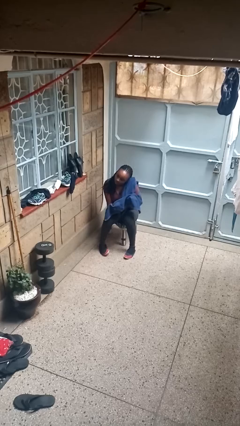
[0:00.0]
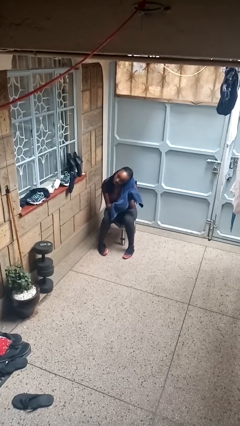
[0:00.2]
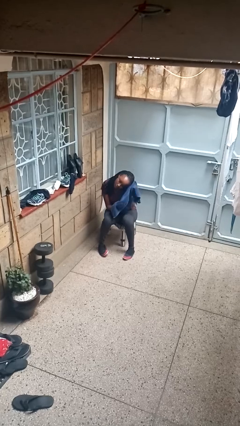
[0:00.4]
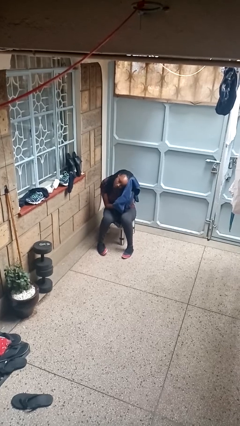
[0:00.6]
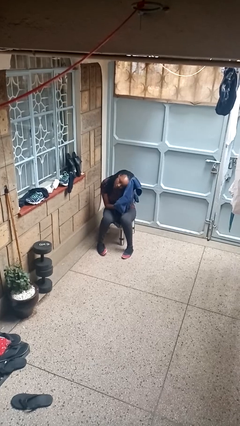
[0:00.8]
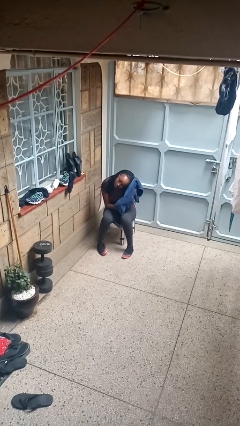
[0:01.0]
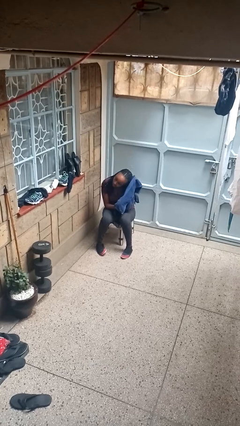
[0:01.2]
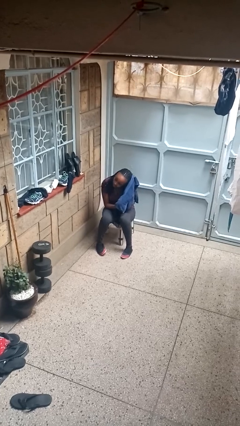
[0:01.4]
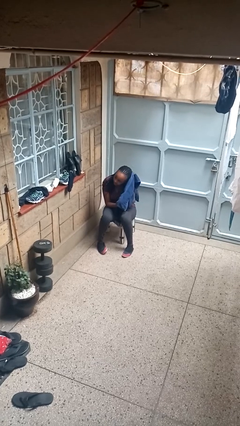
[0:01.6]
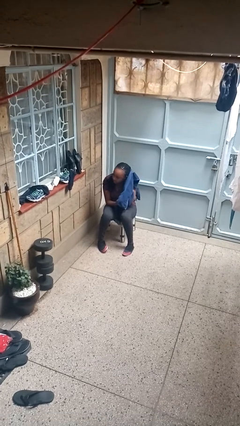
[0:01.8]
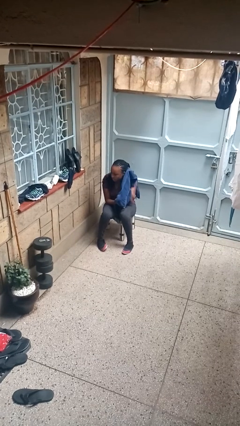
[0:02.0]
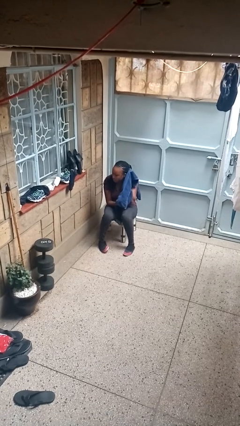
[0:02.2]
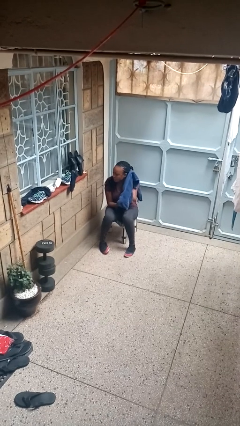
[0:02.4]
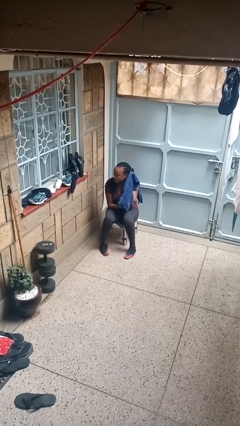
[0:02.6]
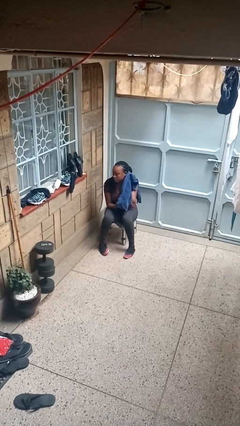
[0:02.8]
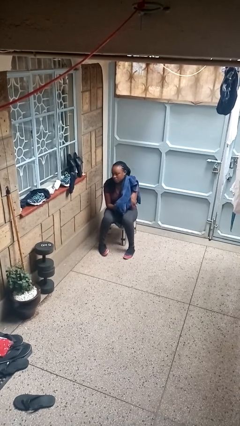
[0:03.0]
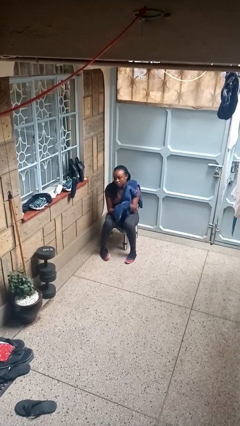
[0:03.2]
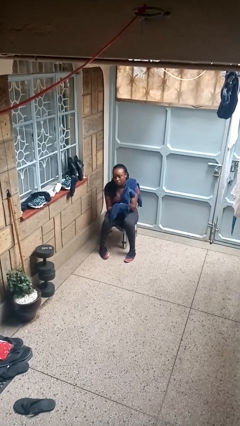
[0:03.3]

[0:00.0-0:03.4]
person dries hair with towel

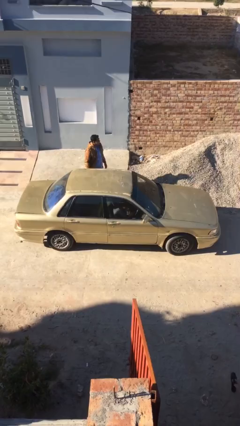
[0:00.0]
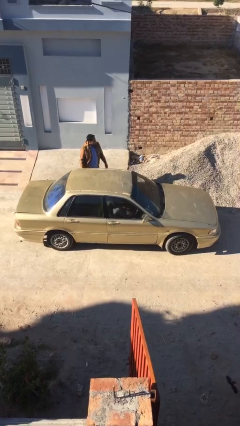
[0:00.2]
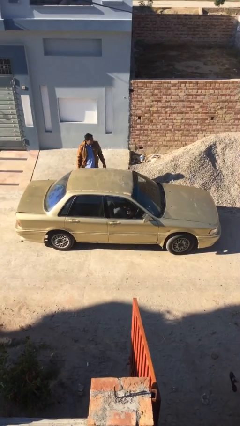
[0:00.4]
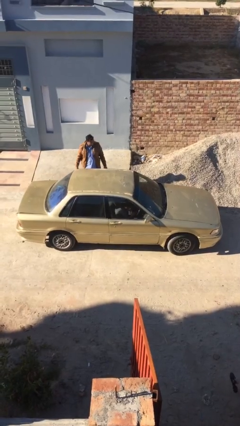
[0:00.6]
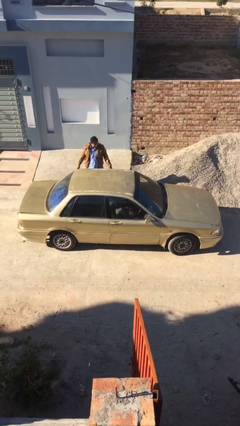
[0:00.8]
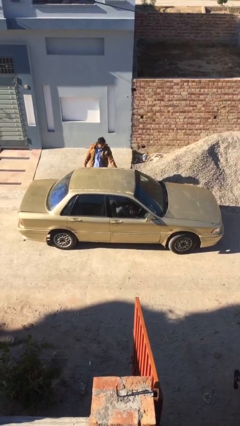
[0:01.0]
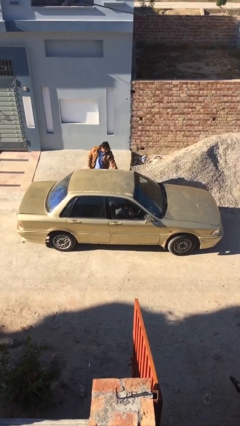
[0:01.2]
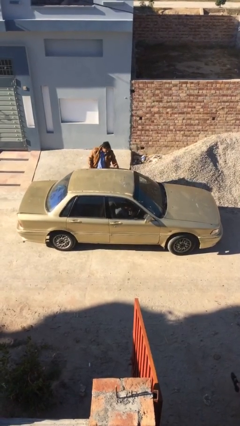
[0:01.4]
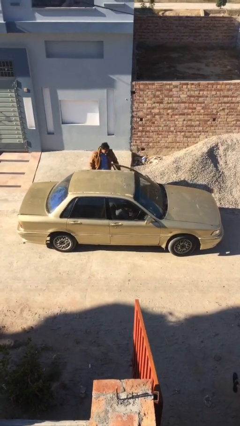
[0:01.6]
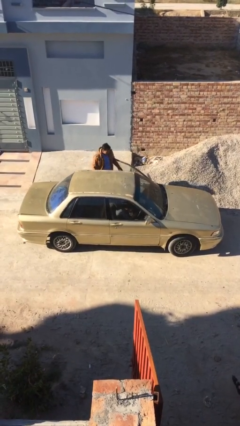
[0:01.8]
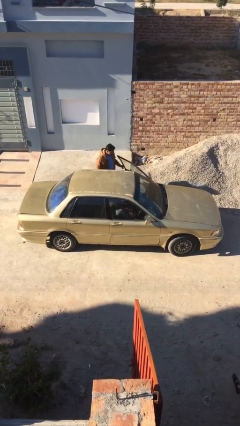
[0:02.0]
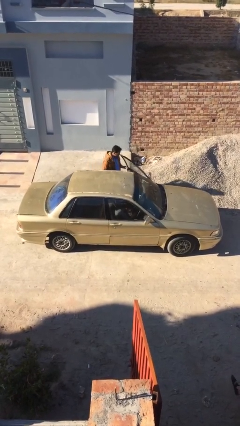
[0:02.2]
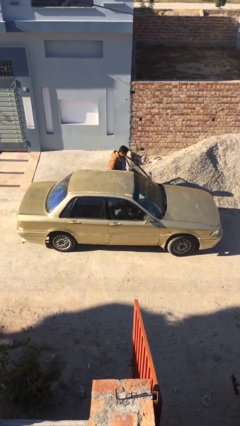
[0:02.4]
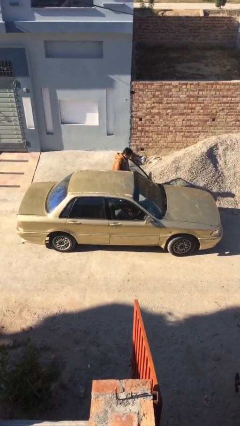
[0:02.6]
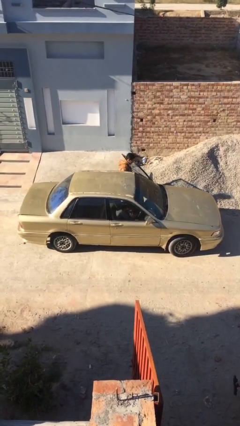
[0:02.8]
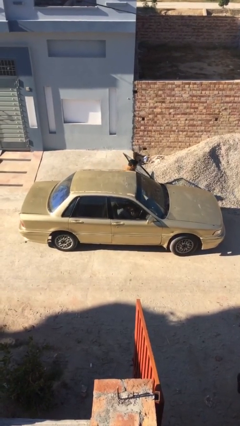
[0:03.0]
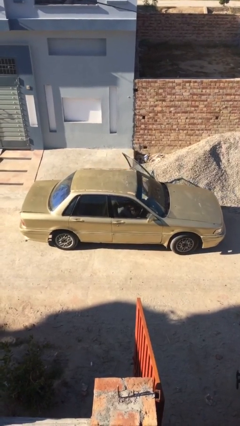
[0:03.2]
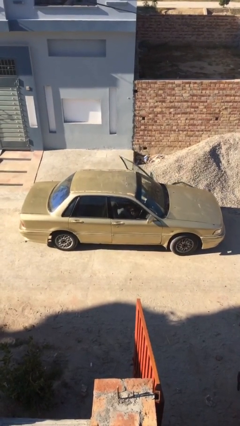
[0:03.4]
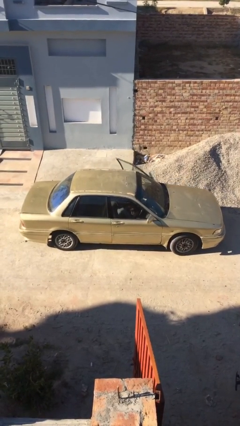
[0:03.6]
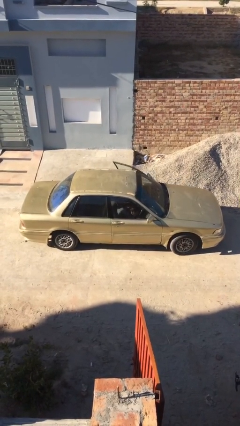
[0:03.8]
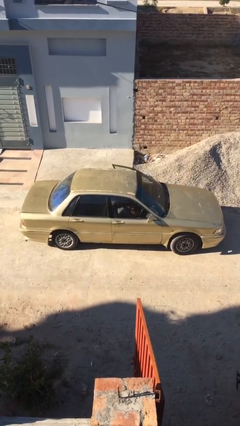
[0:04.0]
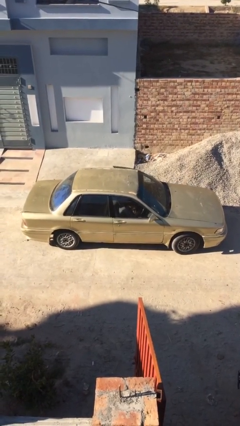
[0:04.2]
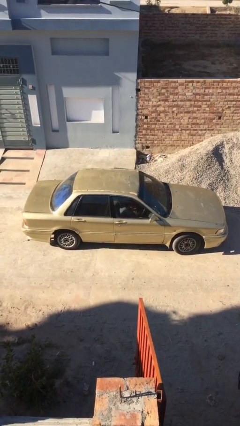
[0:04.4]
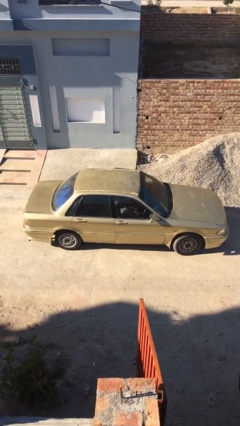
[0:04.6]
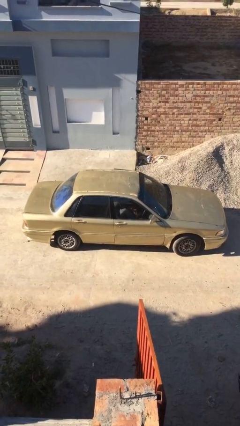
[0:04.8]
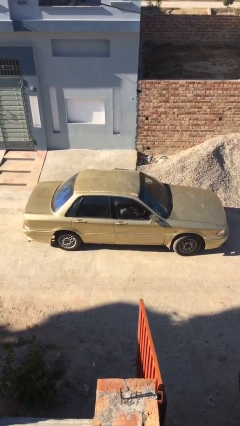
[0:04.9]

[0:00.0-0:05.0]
car picks up person

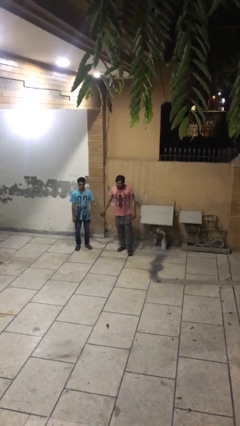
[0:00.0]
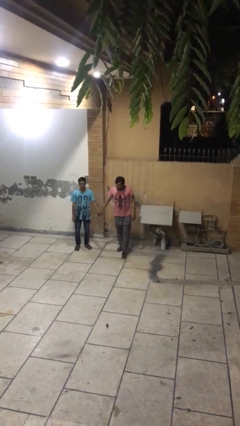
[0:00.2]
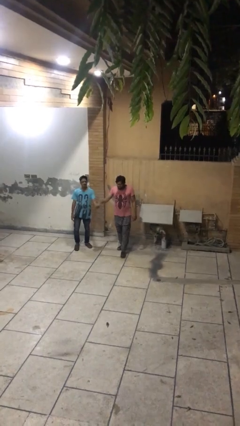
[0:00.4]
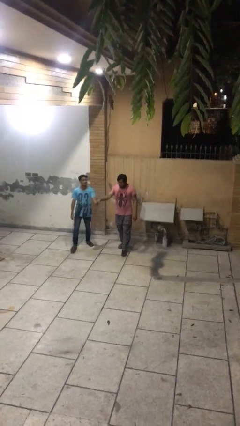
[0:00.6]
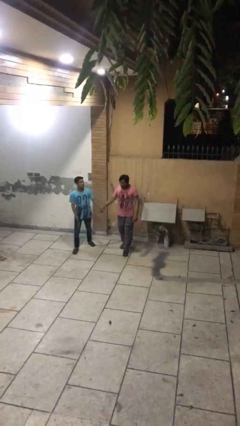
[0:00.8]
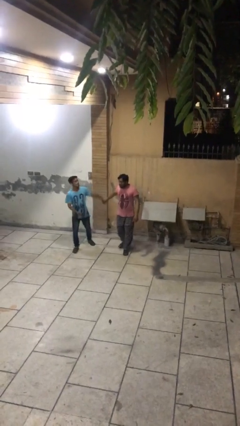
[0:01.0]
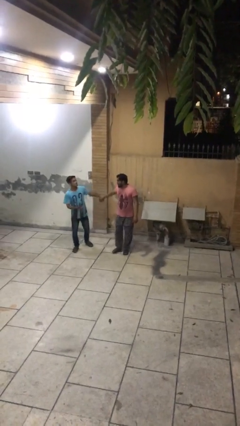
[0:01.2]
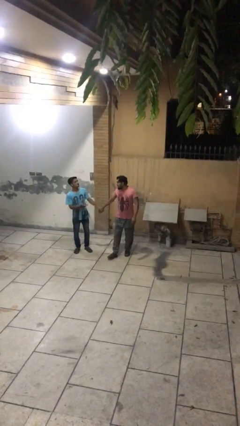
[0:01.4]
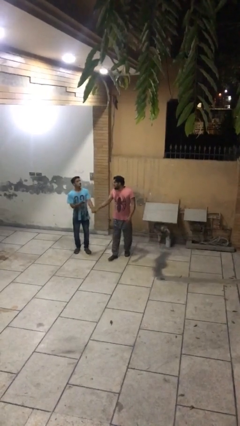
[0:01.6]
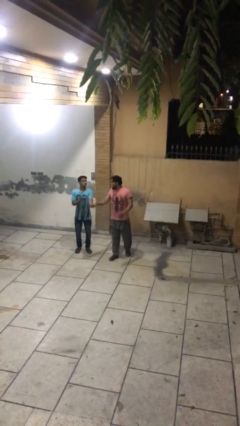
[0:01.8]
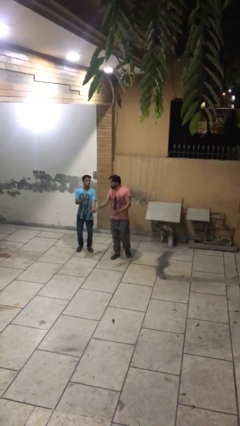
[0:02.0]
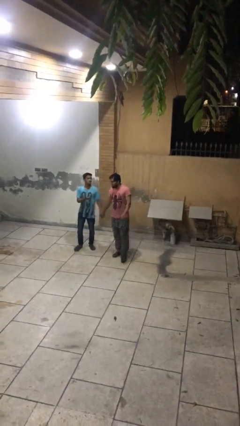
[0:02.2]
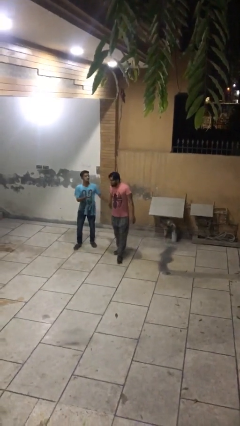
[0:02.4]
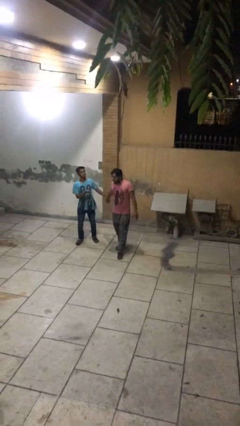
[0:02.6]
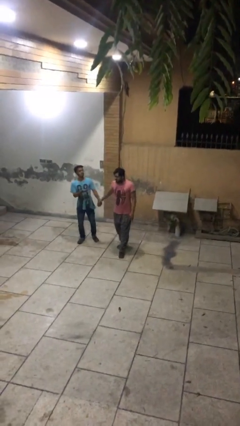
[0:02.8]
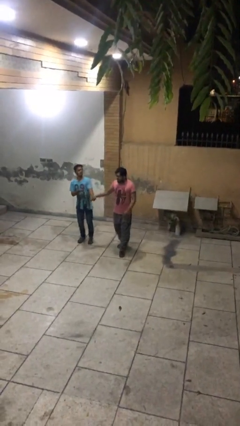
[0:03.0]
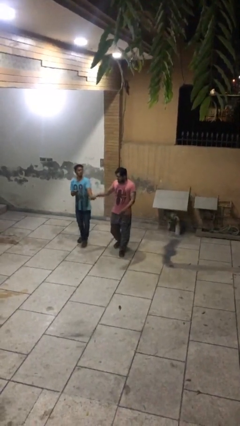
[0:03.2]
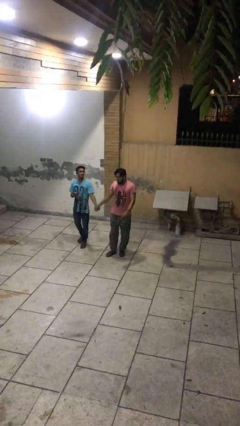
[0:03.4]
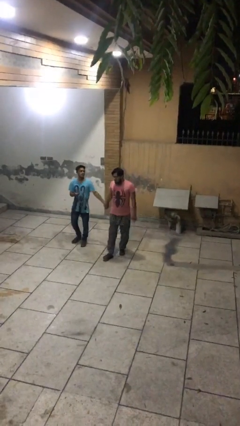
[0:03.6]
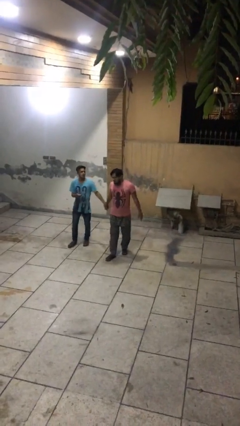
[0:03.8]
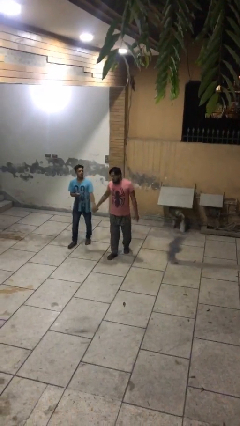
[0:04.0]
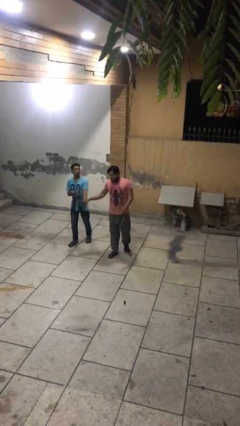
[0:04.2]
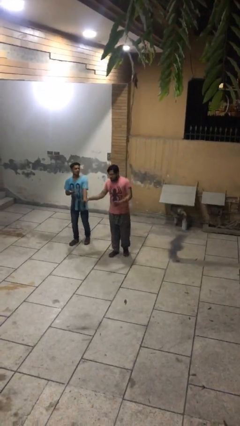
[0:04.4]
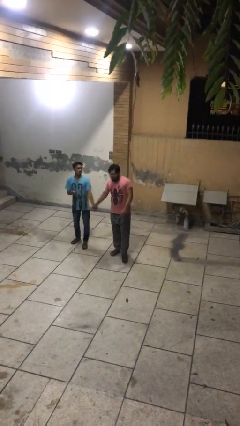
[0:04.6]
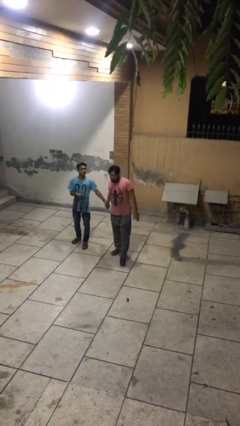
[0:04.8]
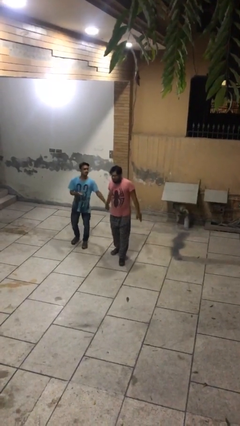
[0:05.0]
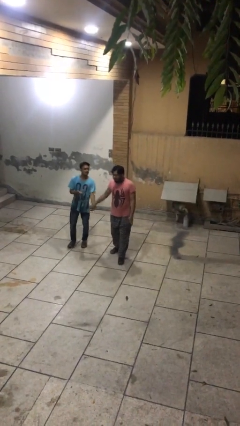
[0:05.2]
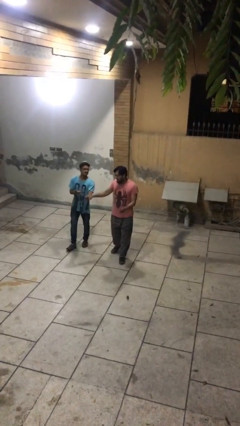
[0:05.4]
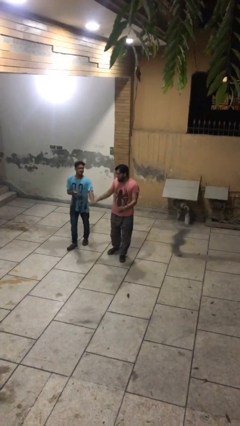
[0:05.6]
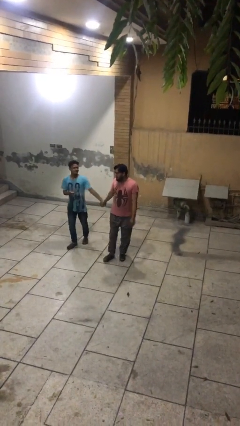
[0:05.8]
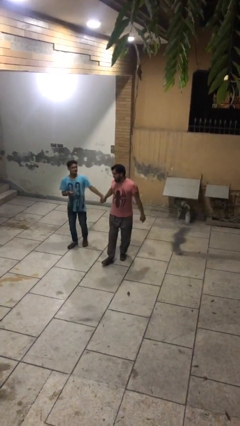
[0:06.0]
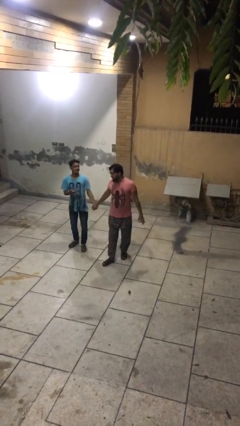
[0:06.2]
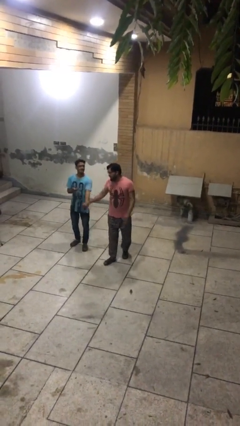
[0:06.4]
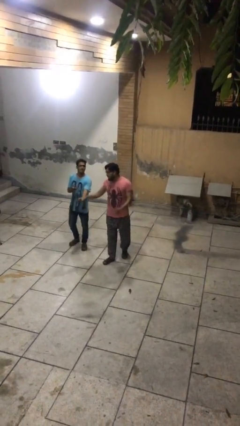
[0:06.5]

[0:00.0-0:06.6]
person holds hand

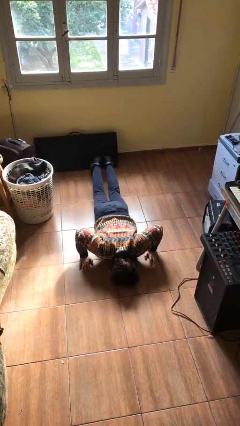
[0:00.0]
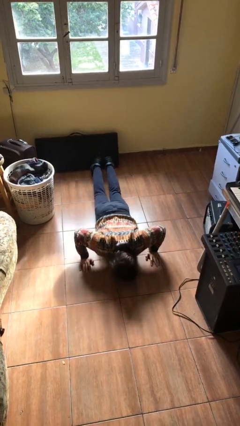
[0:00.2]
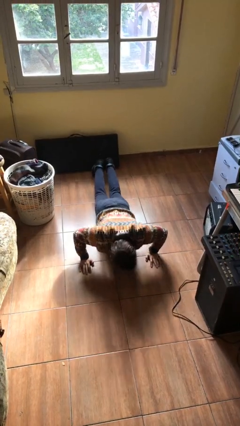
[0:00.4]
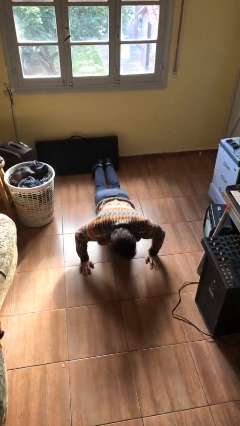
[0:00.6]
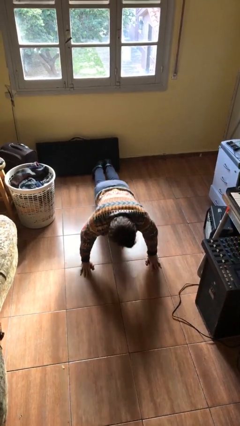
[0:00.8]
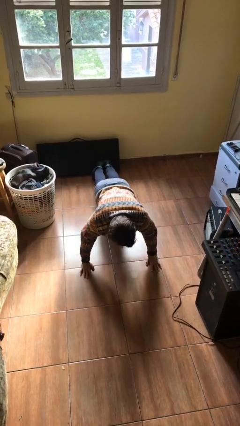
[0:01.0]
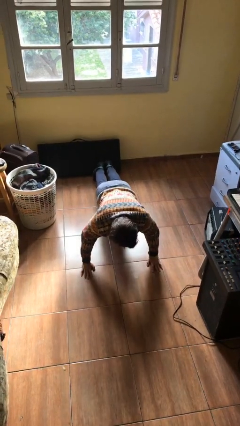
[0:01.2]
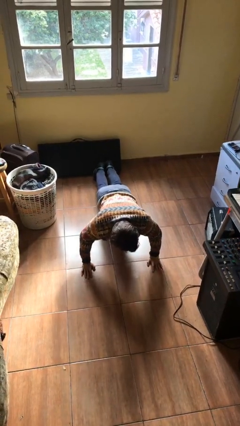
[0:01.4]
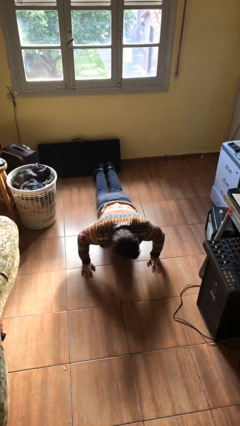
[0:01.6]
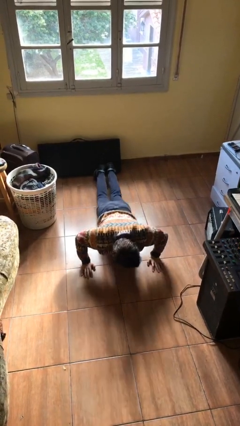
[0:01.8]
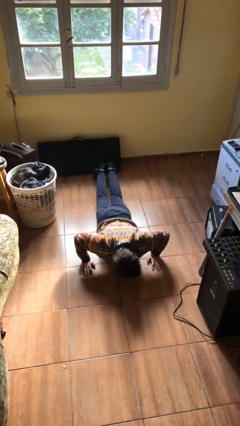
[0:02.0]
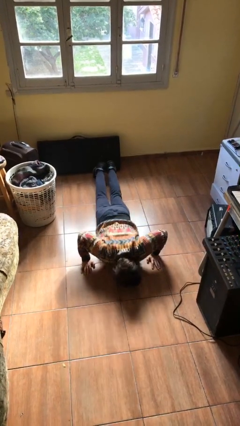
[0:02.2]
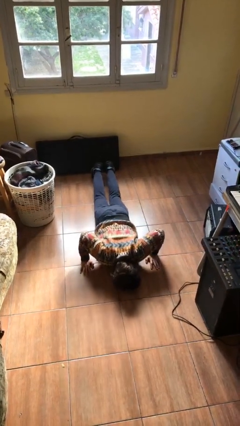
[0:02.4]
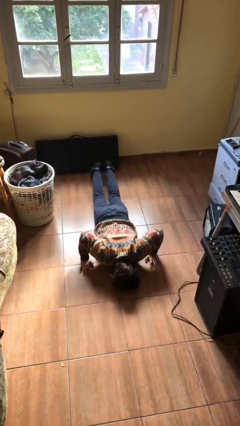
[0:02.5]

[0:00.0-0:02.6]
person exercises with pushup
